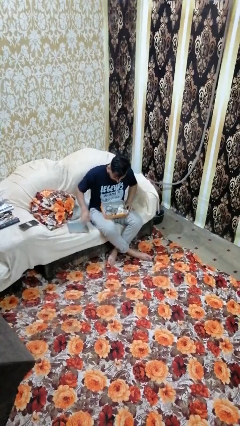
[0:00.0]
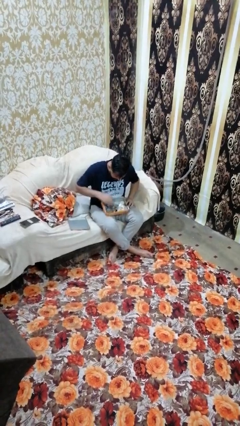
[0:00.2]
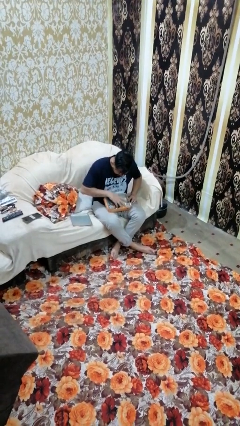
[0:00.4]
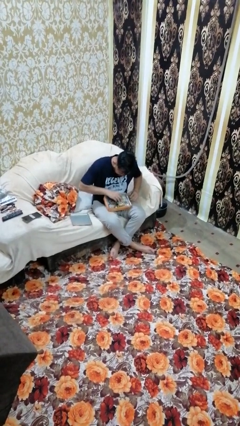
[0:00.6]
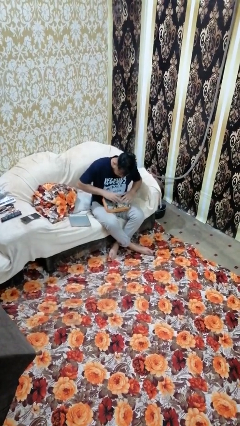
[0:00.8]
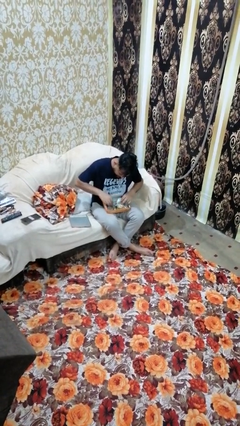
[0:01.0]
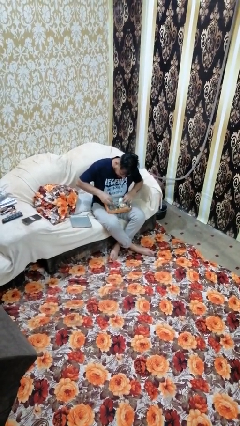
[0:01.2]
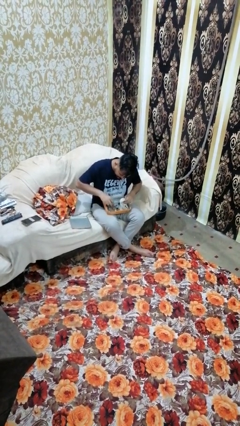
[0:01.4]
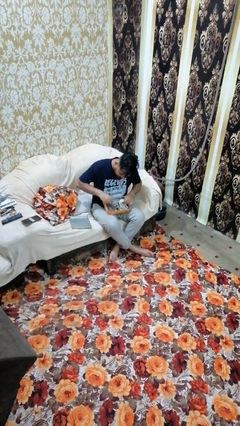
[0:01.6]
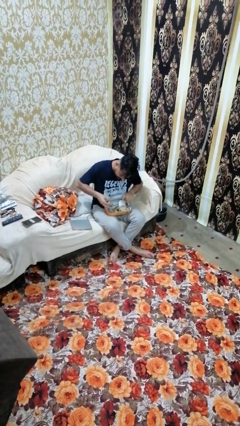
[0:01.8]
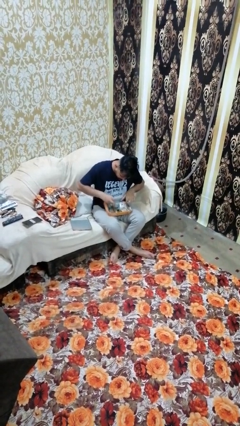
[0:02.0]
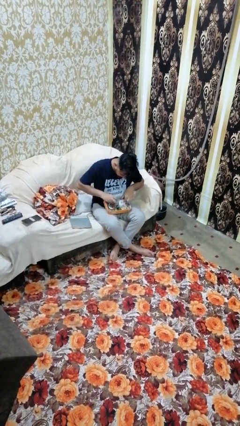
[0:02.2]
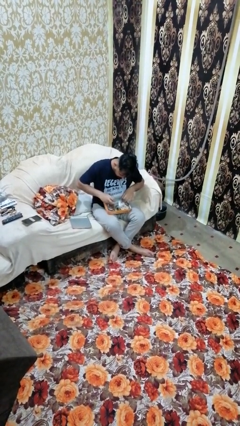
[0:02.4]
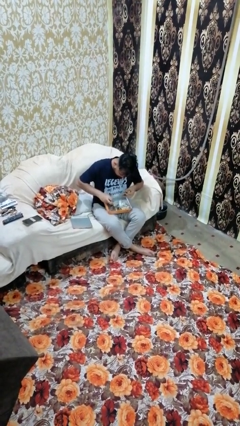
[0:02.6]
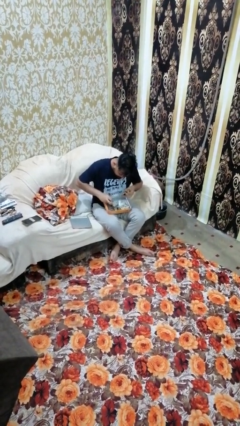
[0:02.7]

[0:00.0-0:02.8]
person searches jewelry box

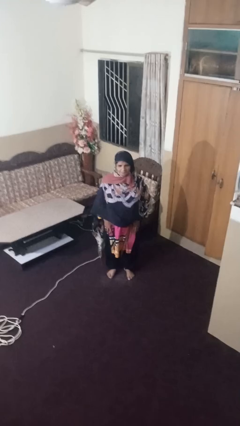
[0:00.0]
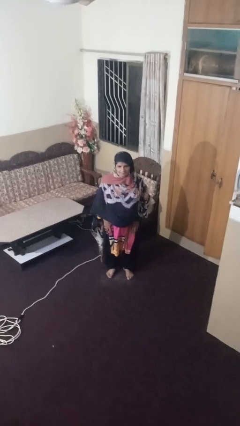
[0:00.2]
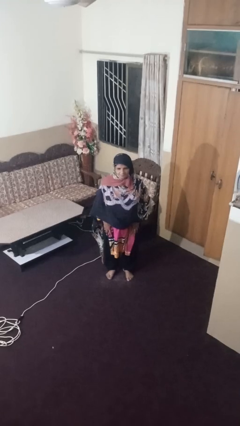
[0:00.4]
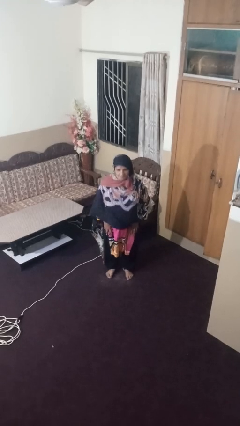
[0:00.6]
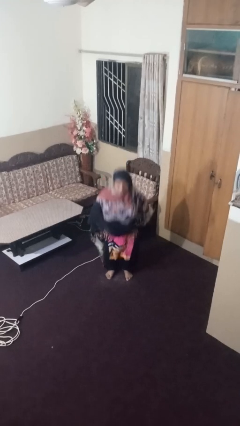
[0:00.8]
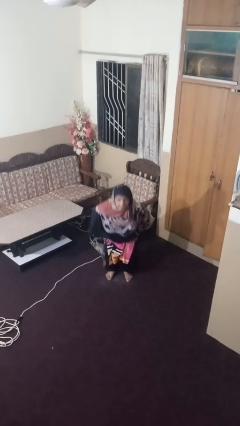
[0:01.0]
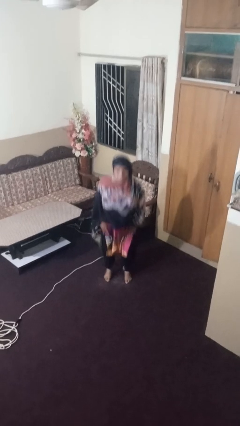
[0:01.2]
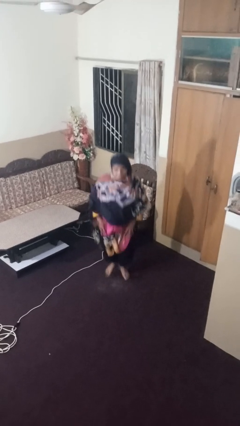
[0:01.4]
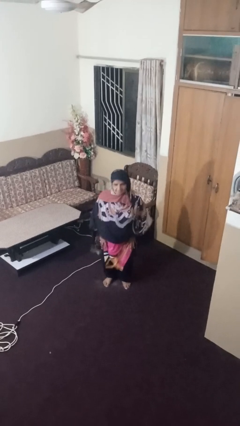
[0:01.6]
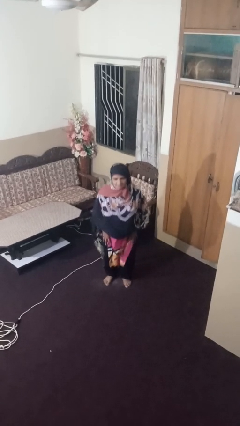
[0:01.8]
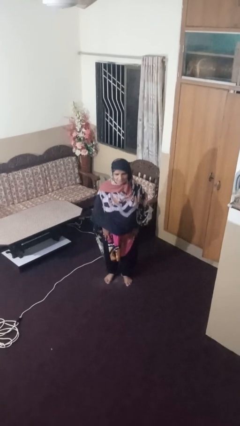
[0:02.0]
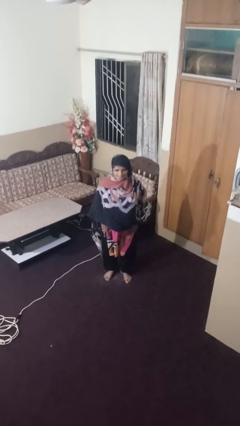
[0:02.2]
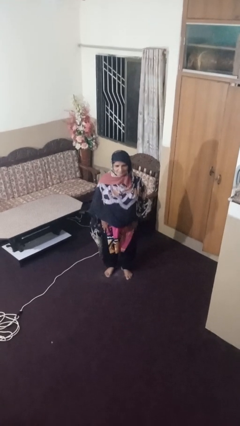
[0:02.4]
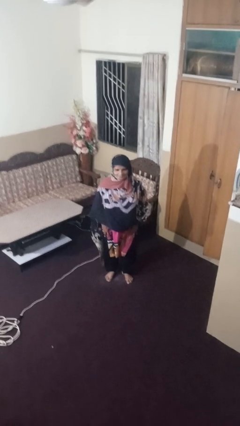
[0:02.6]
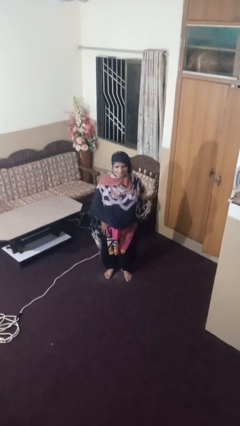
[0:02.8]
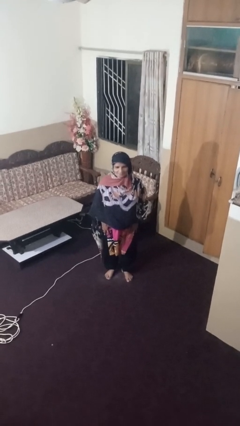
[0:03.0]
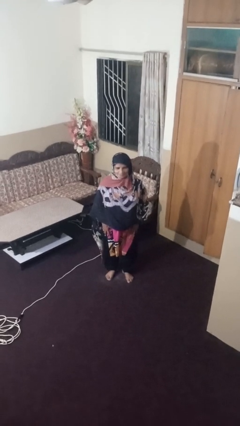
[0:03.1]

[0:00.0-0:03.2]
person jumps

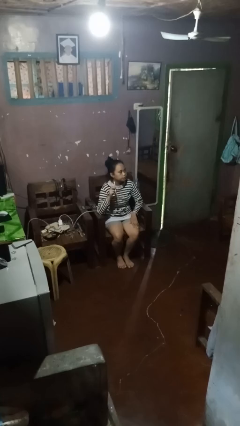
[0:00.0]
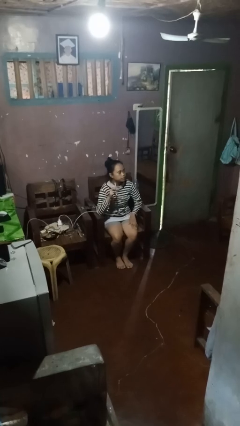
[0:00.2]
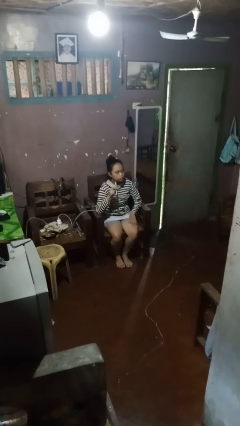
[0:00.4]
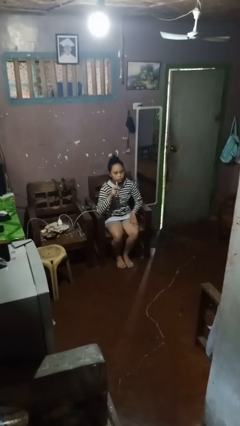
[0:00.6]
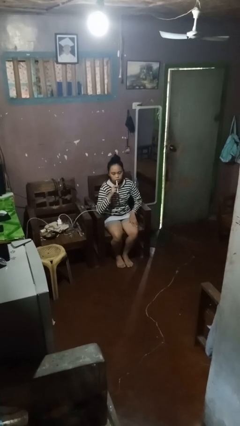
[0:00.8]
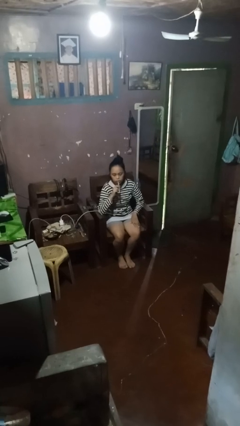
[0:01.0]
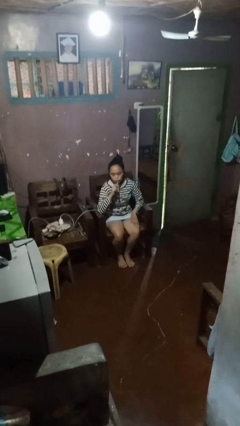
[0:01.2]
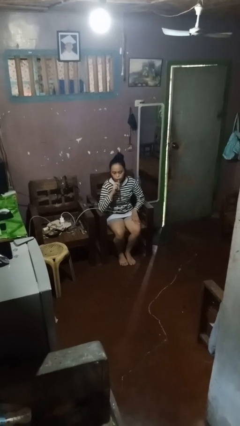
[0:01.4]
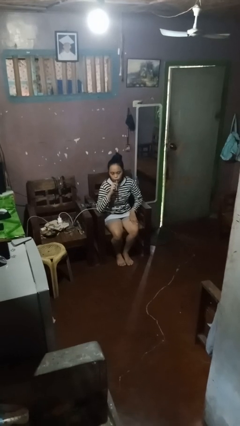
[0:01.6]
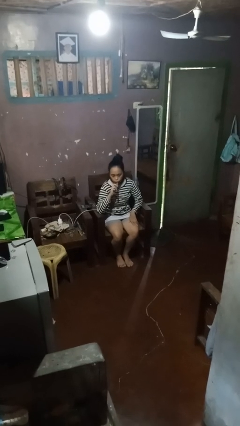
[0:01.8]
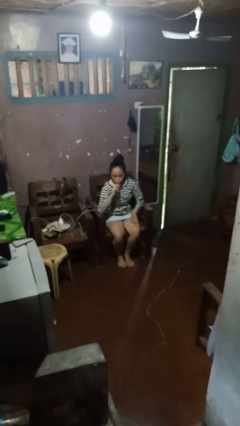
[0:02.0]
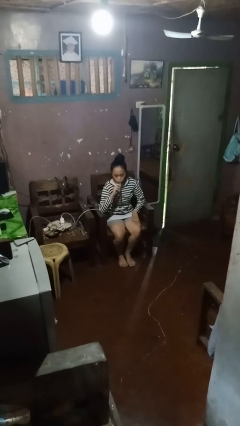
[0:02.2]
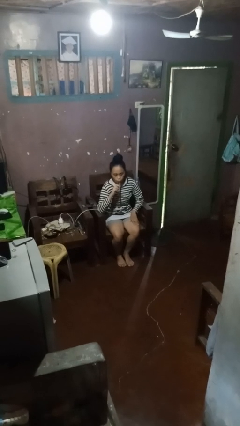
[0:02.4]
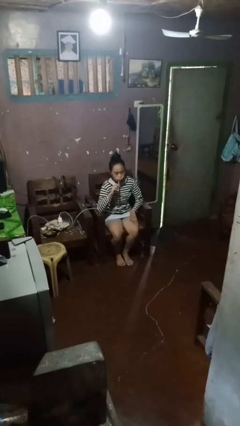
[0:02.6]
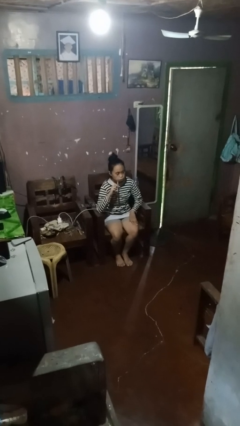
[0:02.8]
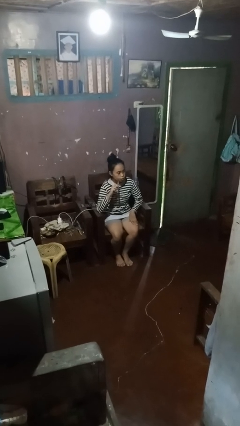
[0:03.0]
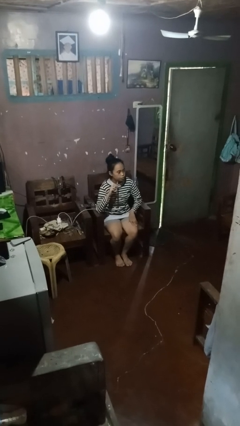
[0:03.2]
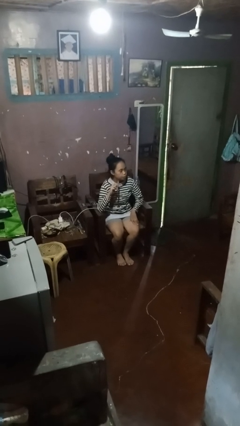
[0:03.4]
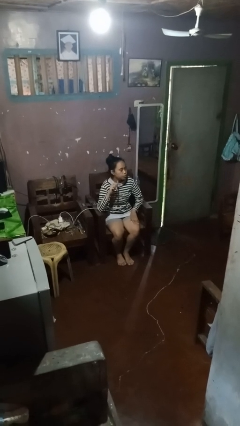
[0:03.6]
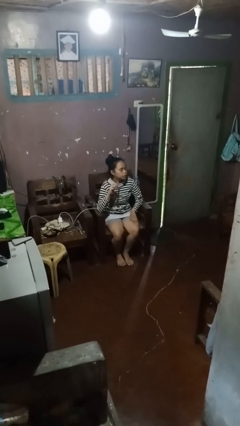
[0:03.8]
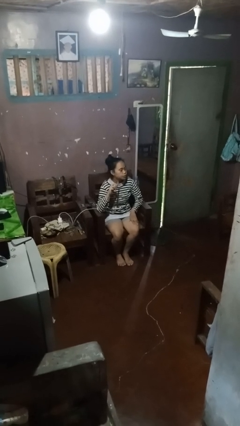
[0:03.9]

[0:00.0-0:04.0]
person vapes

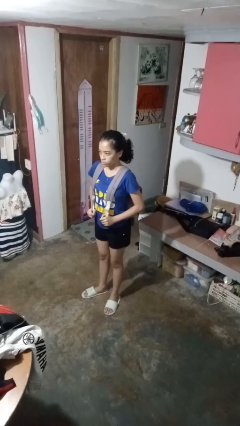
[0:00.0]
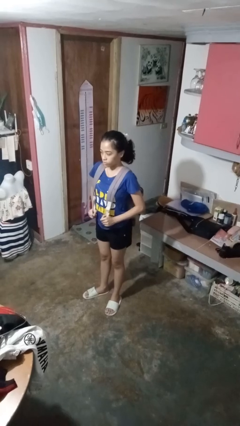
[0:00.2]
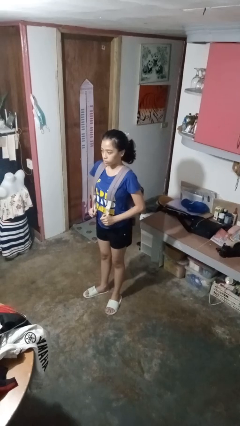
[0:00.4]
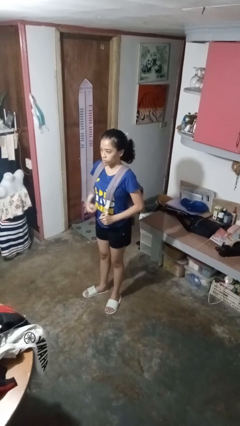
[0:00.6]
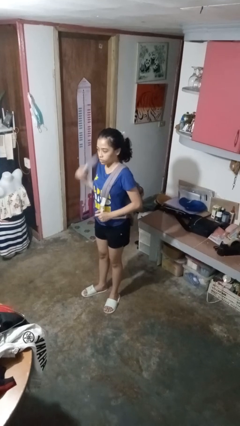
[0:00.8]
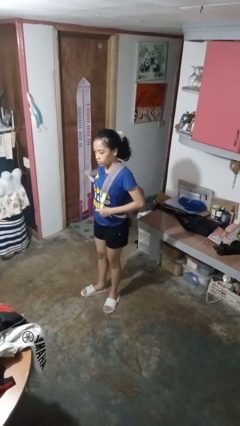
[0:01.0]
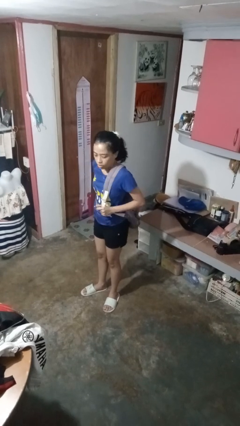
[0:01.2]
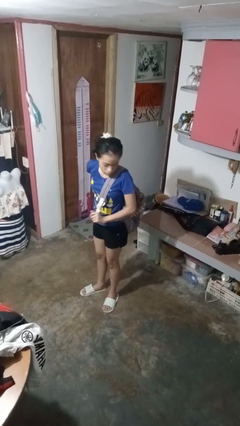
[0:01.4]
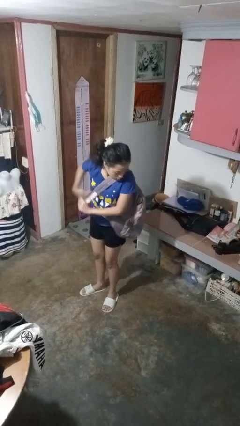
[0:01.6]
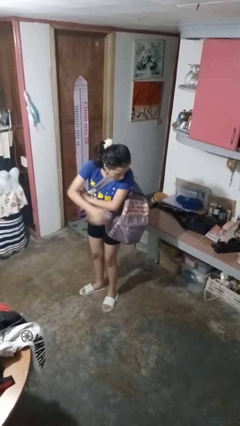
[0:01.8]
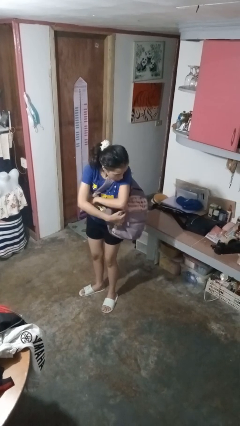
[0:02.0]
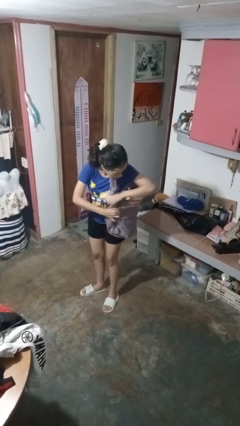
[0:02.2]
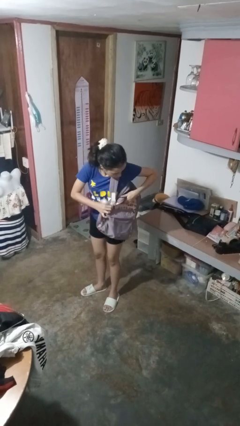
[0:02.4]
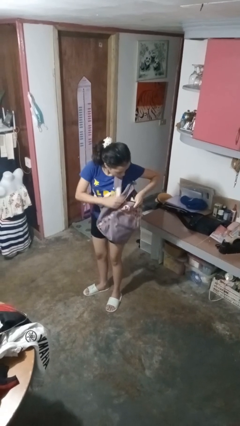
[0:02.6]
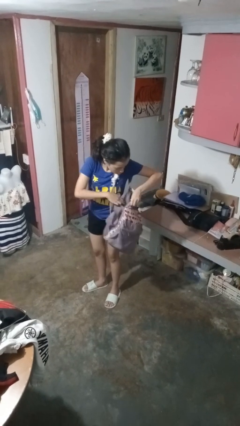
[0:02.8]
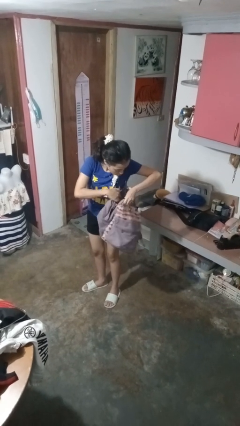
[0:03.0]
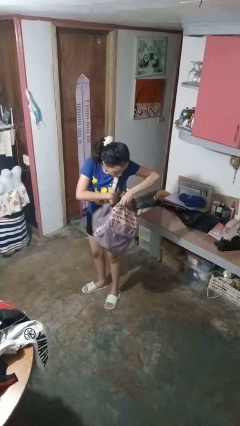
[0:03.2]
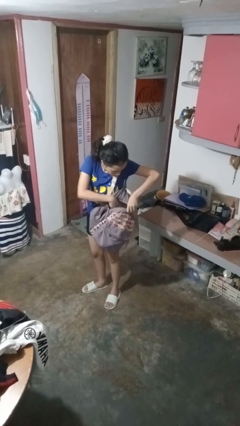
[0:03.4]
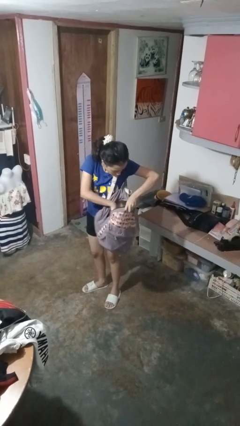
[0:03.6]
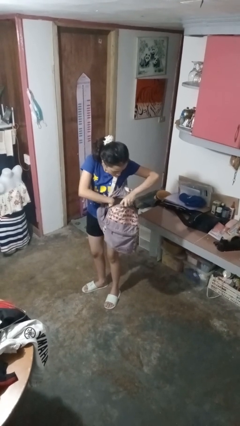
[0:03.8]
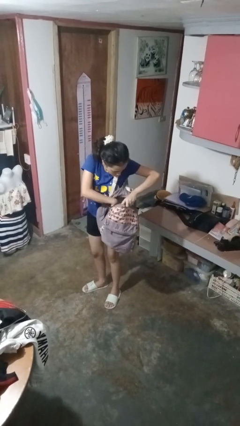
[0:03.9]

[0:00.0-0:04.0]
person searches in backpack

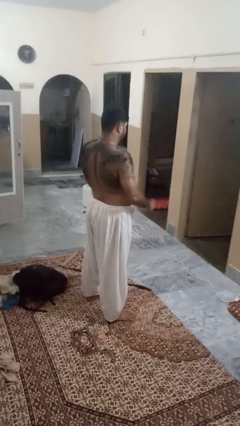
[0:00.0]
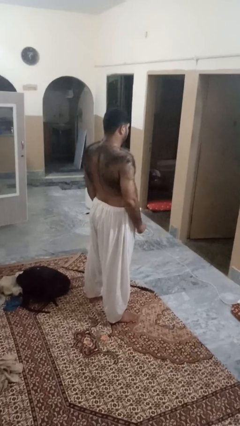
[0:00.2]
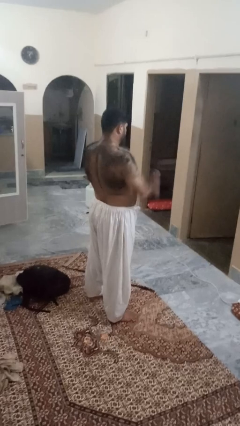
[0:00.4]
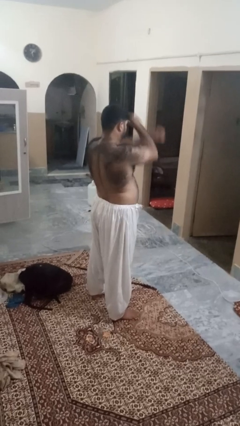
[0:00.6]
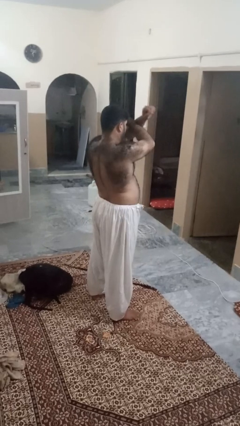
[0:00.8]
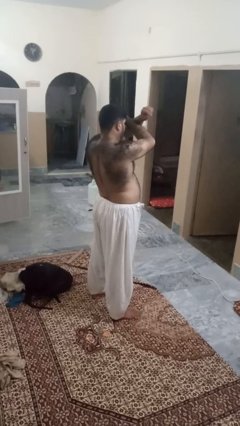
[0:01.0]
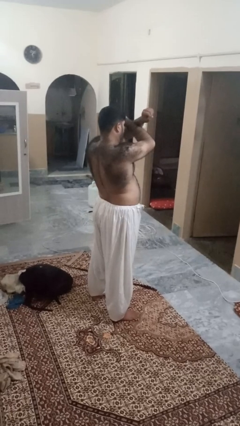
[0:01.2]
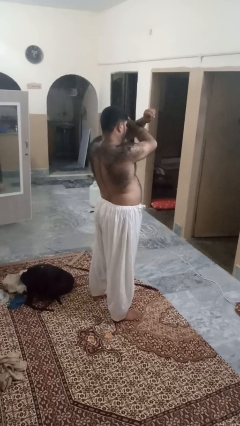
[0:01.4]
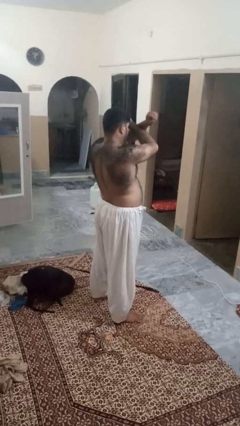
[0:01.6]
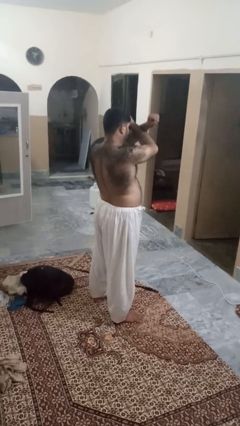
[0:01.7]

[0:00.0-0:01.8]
person gestures arms x

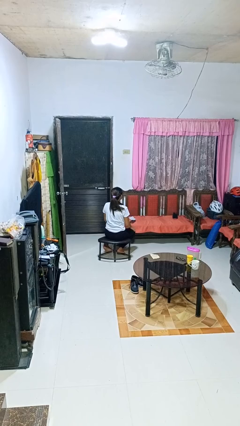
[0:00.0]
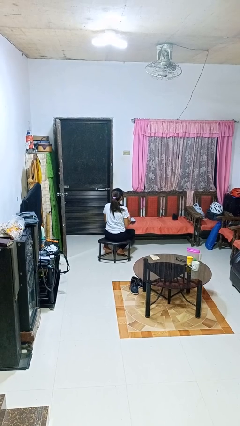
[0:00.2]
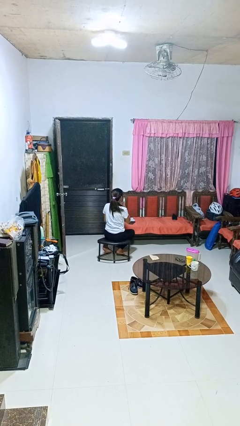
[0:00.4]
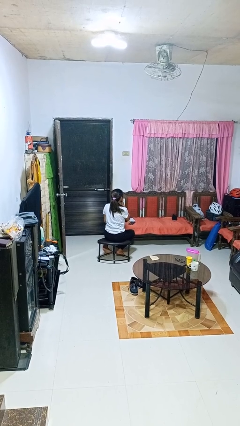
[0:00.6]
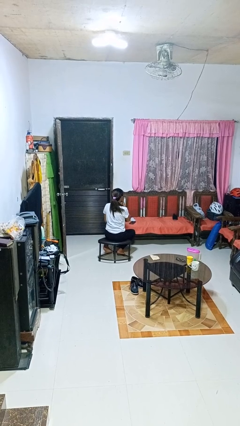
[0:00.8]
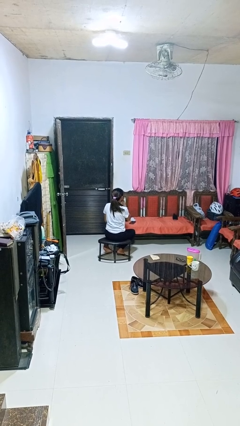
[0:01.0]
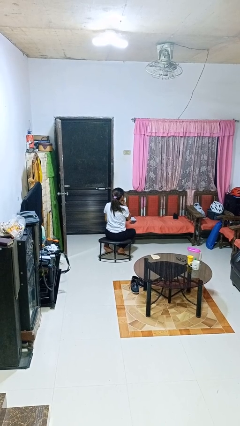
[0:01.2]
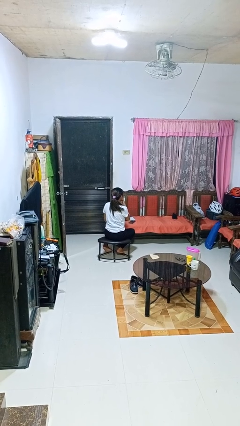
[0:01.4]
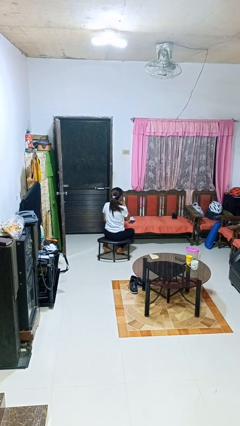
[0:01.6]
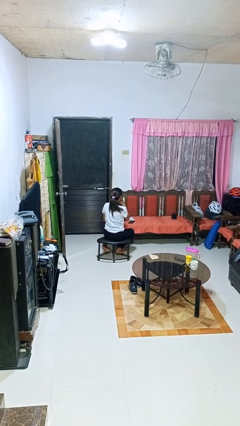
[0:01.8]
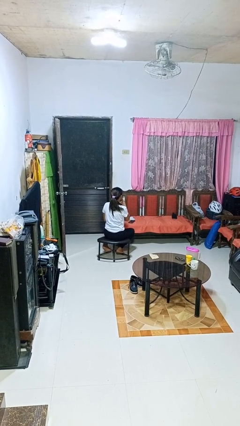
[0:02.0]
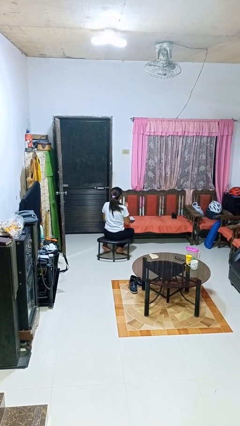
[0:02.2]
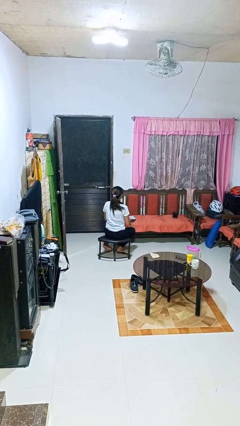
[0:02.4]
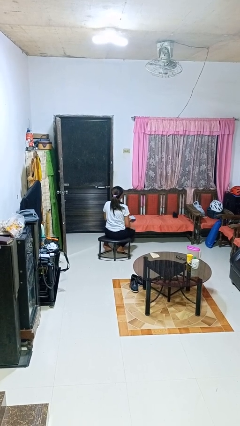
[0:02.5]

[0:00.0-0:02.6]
person strokes chin
